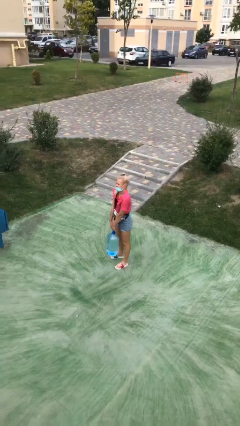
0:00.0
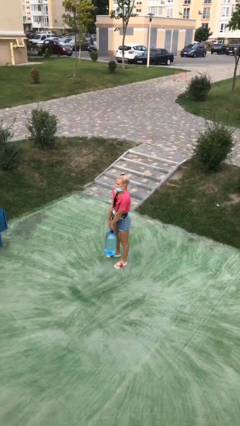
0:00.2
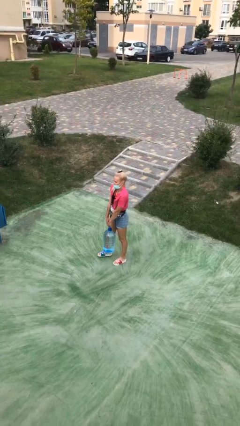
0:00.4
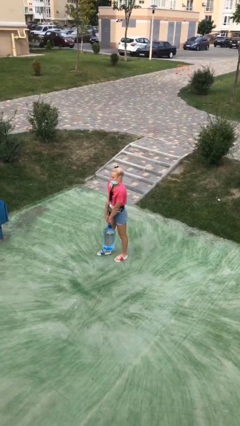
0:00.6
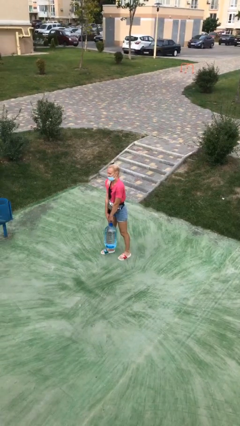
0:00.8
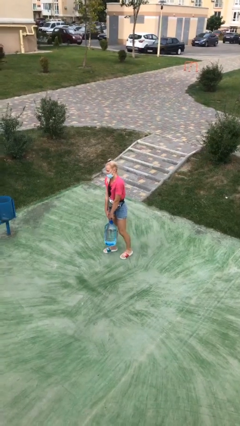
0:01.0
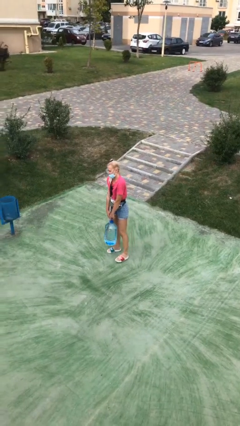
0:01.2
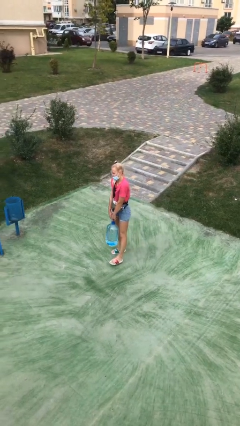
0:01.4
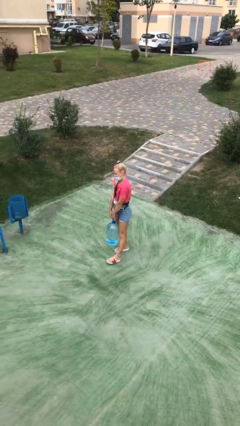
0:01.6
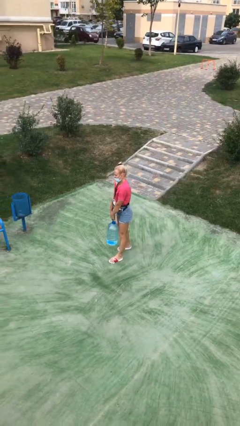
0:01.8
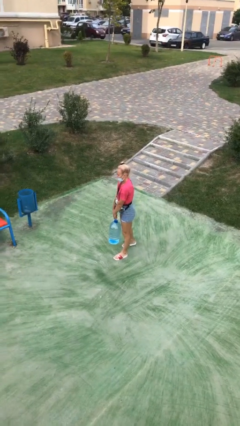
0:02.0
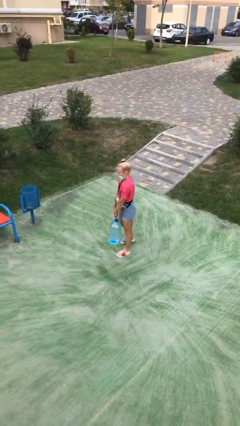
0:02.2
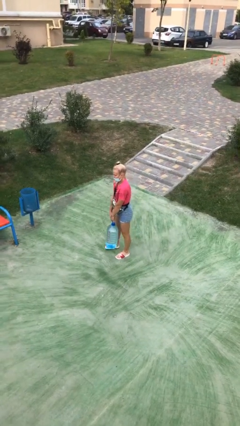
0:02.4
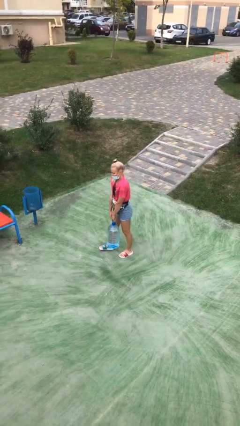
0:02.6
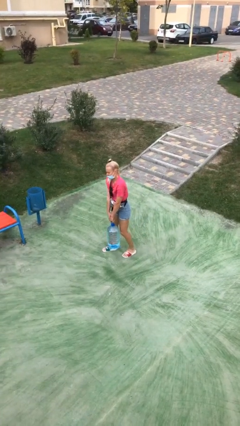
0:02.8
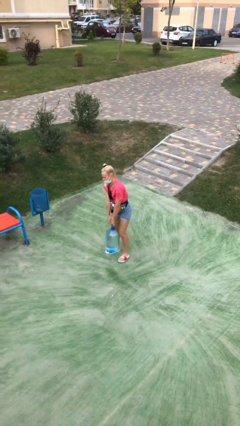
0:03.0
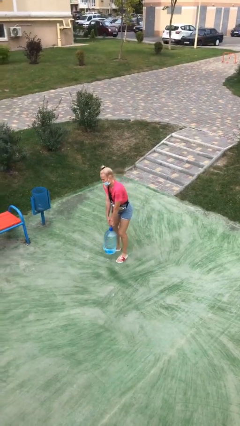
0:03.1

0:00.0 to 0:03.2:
person carries heavy object

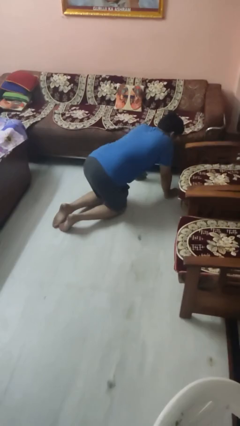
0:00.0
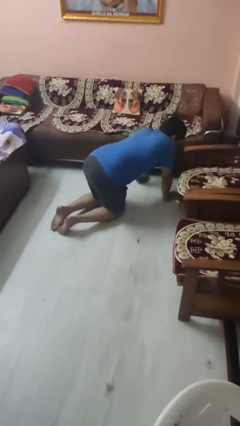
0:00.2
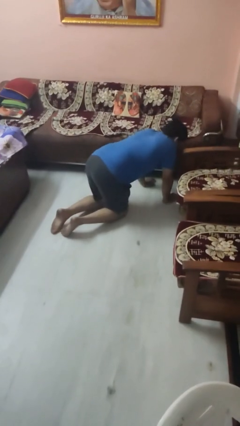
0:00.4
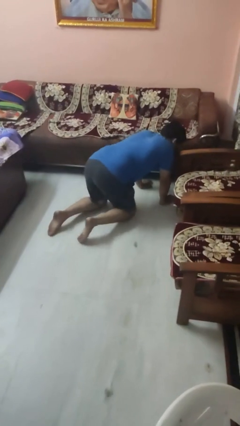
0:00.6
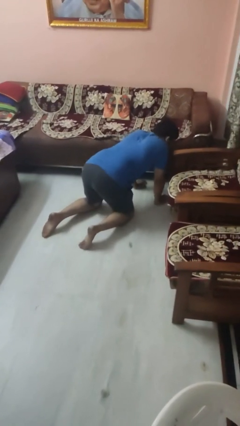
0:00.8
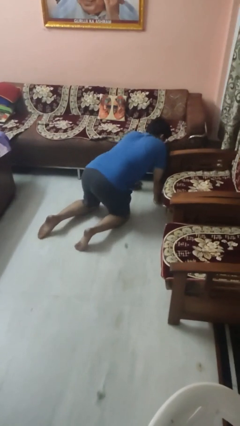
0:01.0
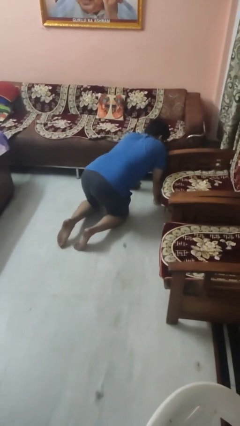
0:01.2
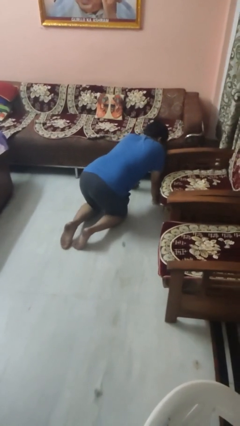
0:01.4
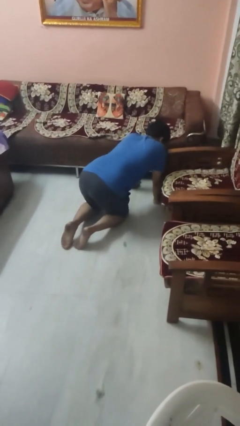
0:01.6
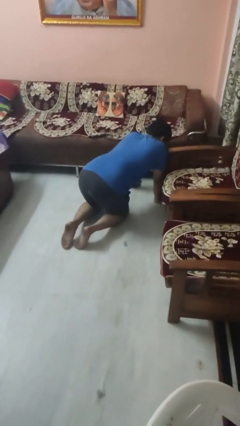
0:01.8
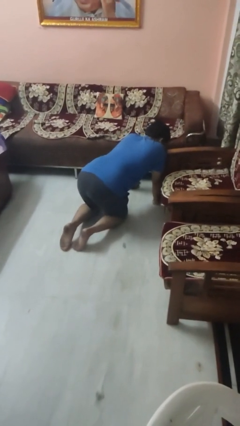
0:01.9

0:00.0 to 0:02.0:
person crawls

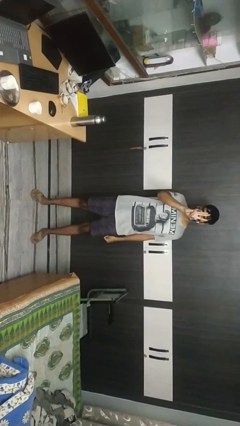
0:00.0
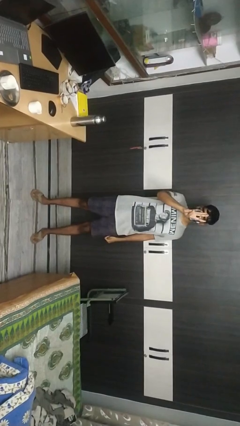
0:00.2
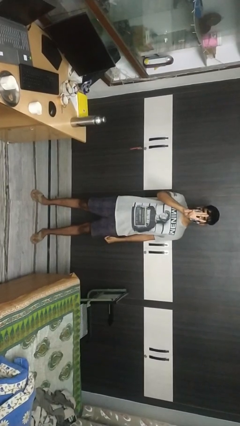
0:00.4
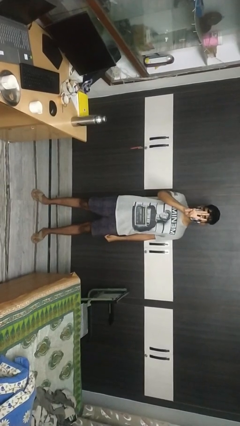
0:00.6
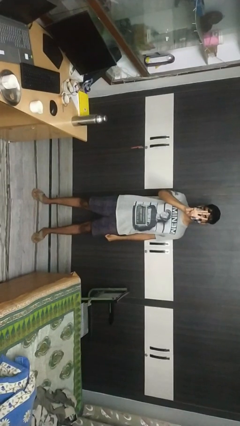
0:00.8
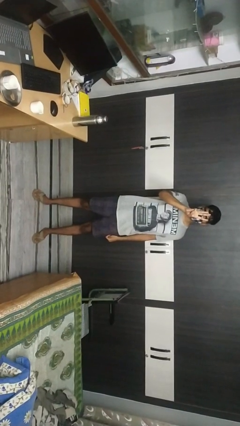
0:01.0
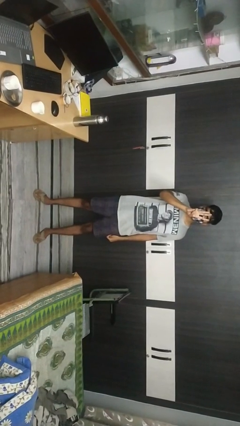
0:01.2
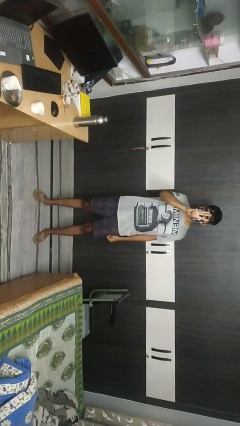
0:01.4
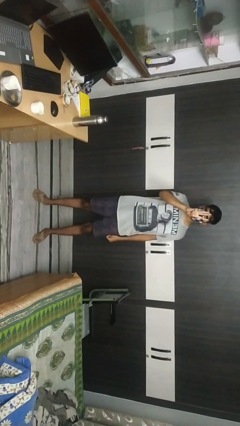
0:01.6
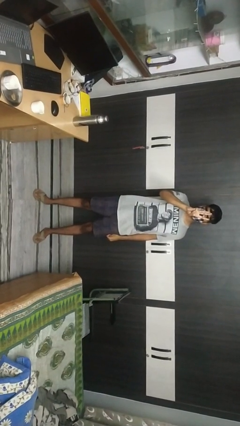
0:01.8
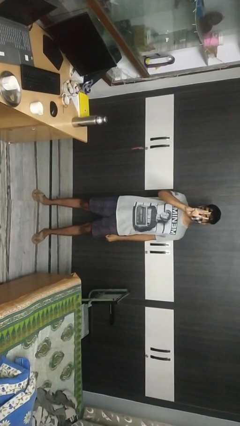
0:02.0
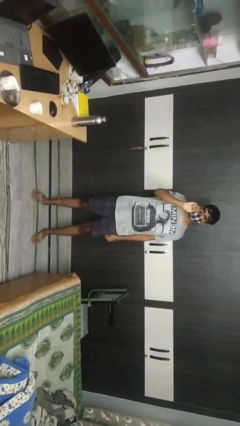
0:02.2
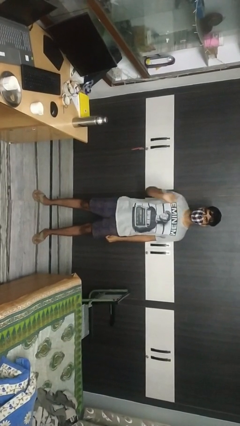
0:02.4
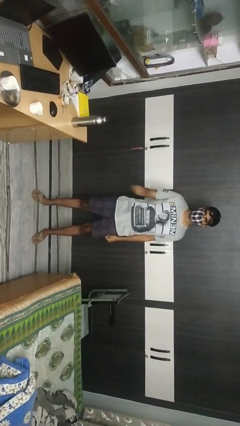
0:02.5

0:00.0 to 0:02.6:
person gestures number three

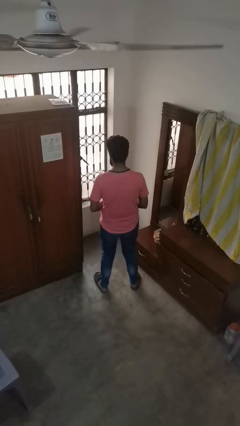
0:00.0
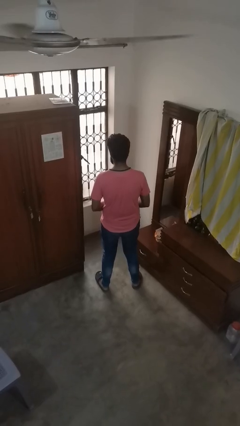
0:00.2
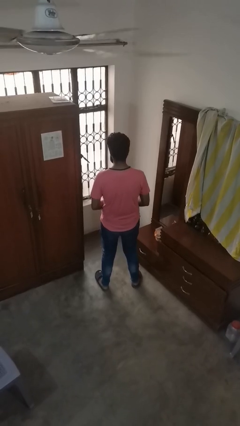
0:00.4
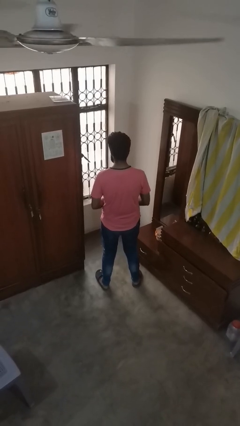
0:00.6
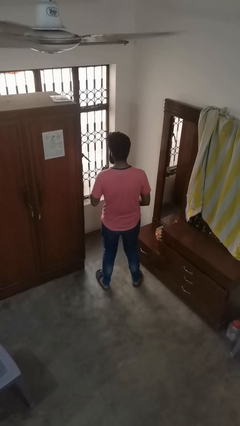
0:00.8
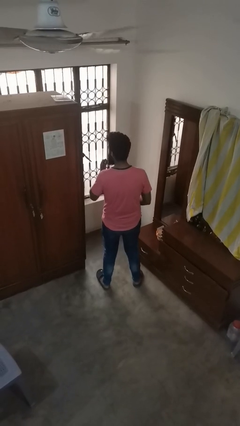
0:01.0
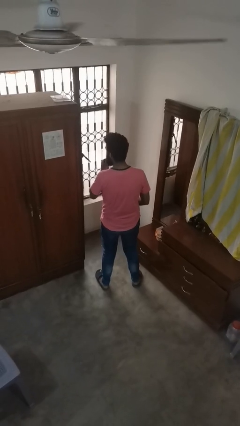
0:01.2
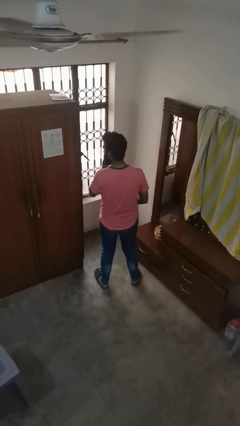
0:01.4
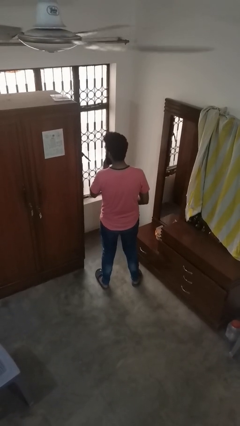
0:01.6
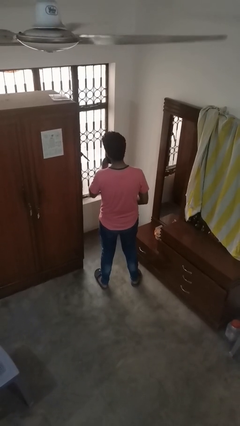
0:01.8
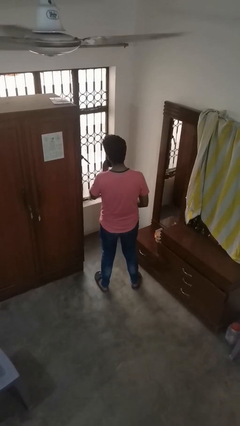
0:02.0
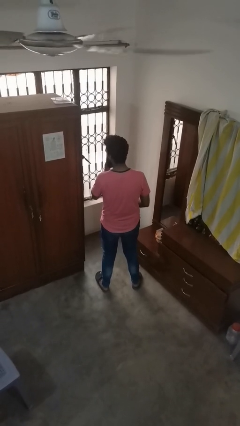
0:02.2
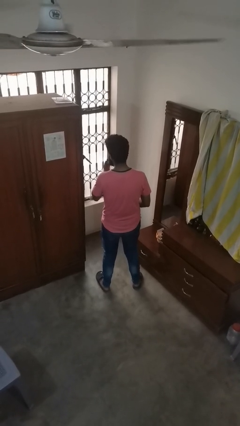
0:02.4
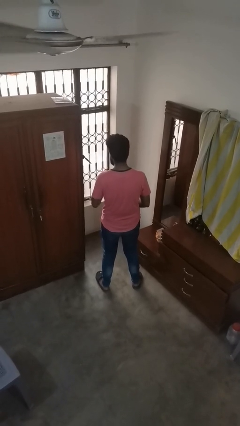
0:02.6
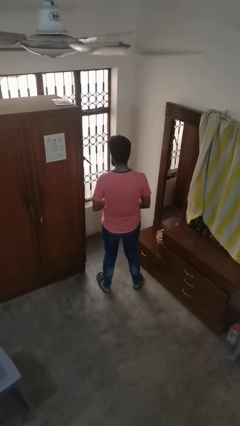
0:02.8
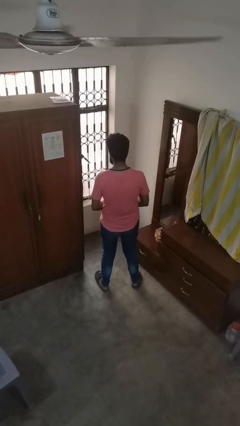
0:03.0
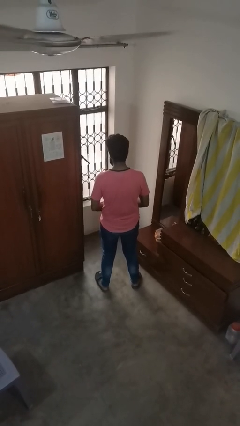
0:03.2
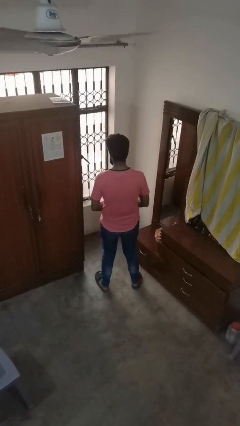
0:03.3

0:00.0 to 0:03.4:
person applies lip makeup

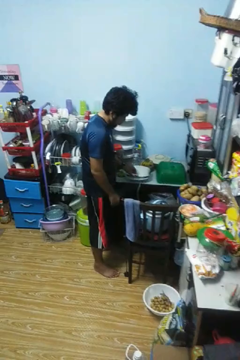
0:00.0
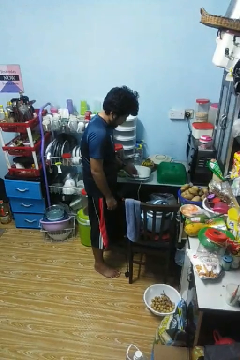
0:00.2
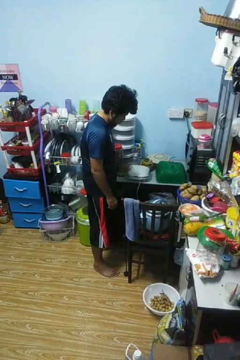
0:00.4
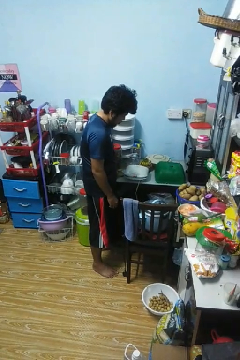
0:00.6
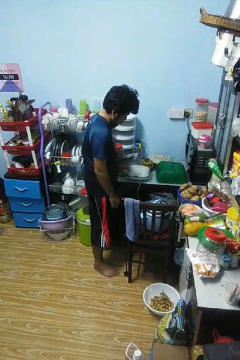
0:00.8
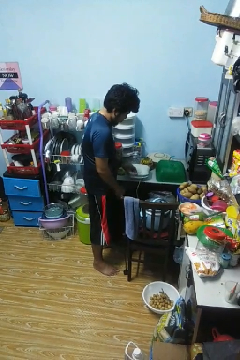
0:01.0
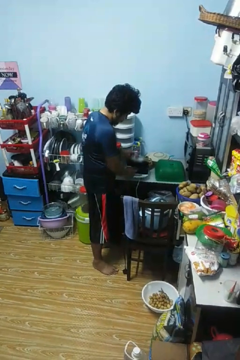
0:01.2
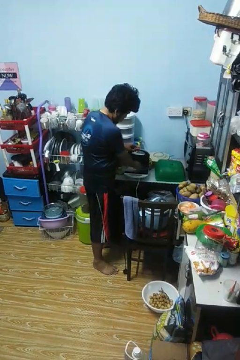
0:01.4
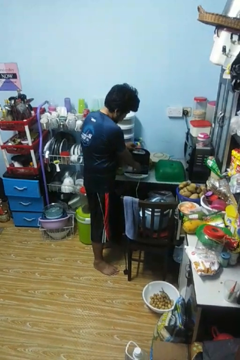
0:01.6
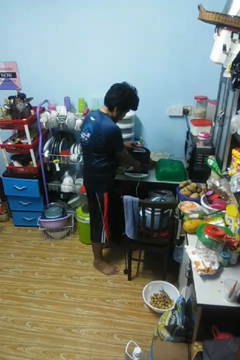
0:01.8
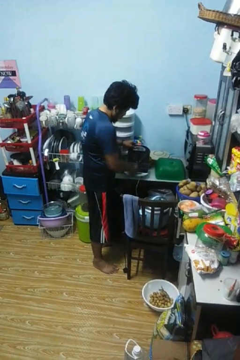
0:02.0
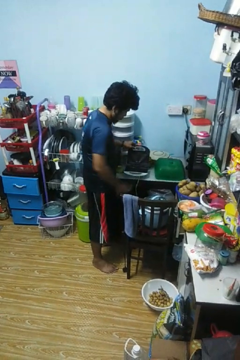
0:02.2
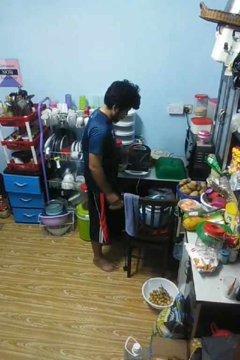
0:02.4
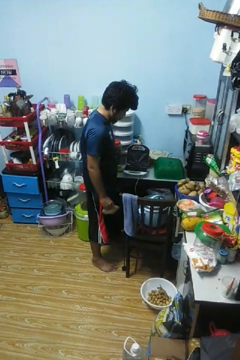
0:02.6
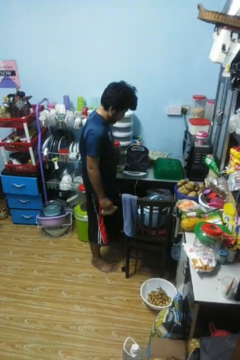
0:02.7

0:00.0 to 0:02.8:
person takes object from toaster

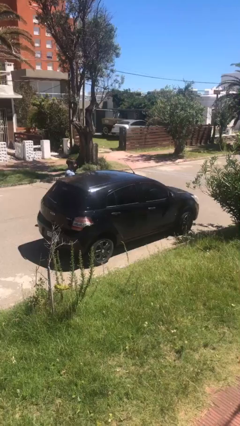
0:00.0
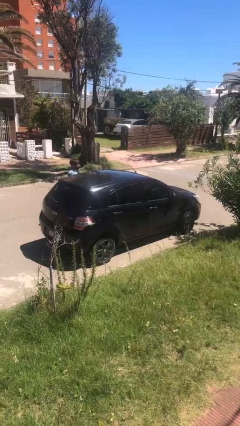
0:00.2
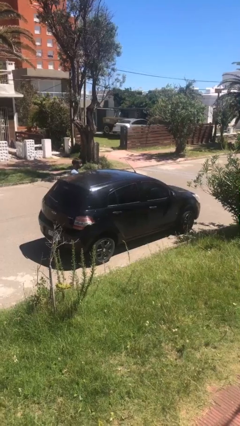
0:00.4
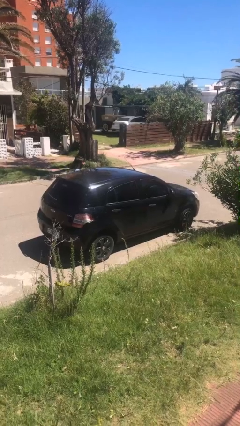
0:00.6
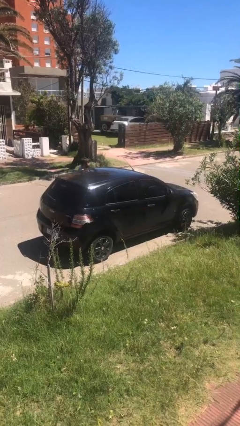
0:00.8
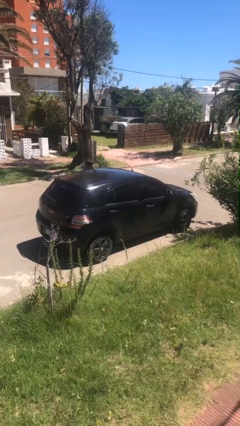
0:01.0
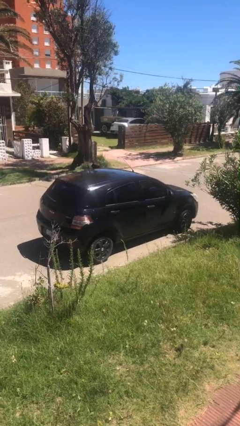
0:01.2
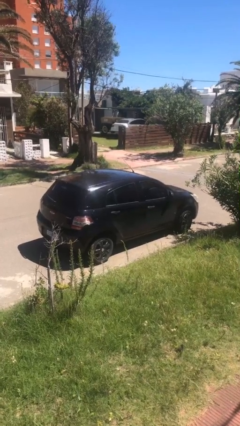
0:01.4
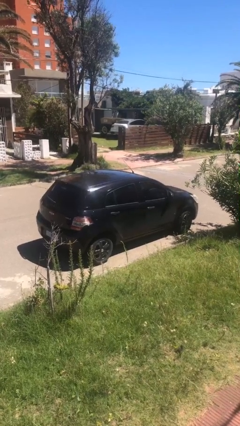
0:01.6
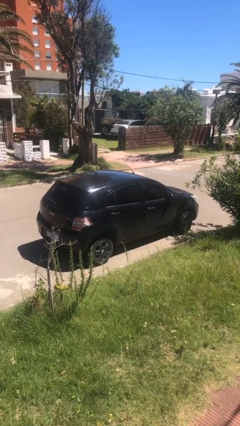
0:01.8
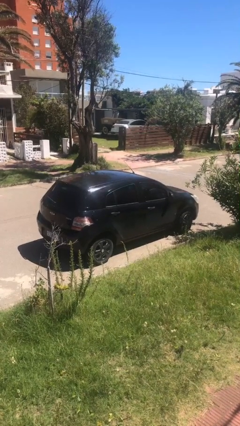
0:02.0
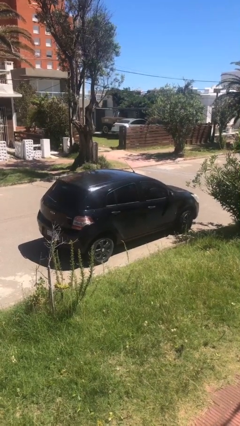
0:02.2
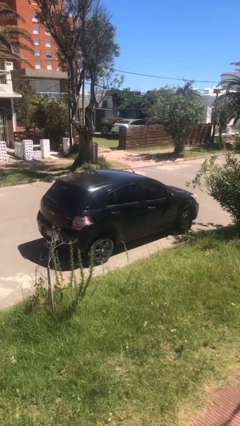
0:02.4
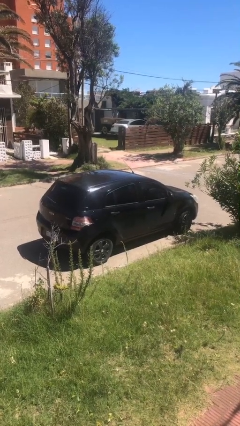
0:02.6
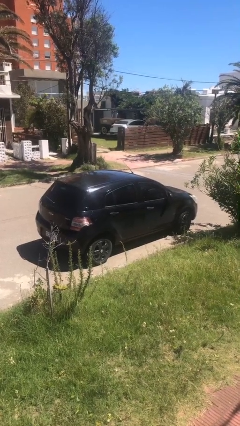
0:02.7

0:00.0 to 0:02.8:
car picks up person

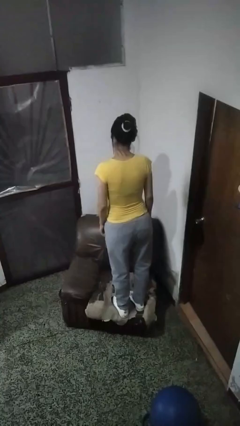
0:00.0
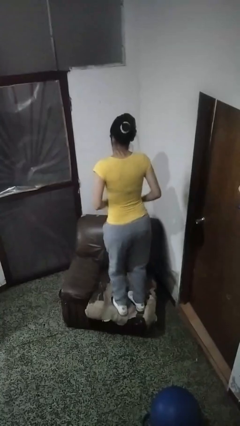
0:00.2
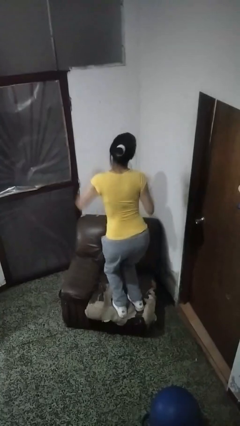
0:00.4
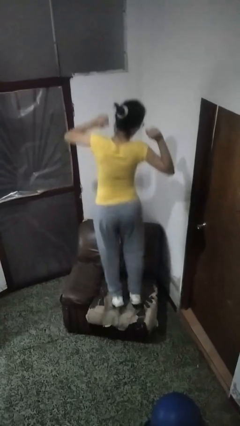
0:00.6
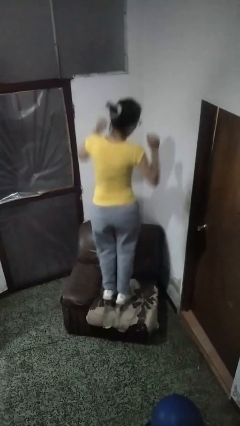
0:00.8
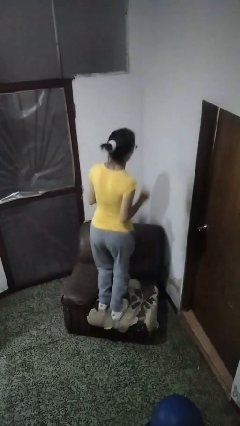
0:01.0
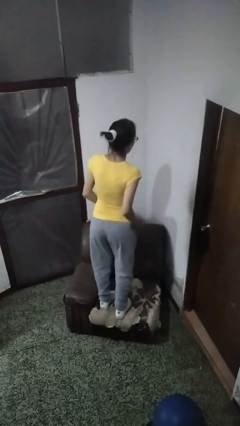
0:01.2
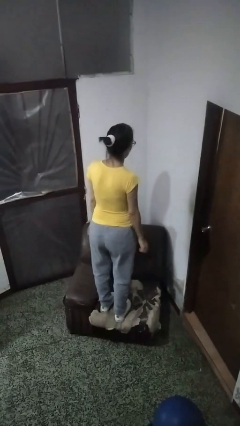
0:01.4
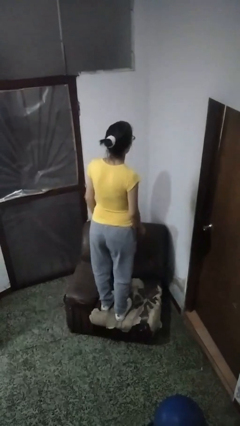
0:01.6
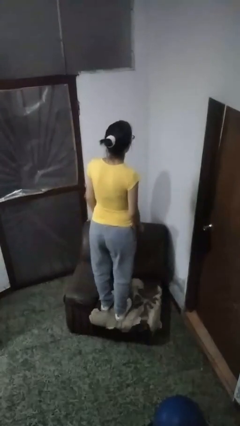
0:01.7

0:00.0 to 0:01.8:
person jumps on couch
